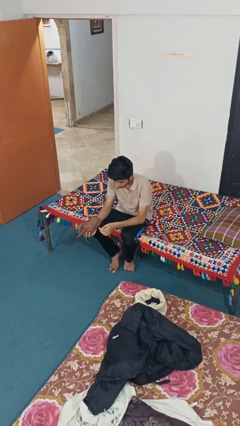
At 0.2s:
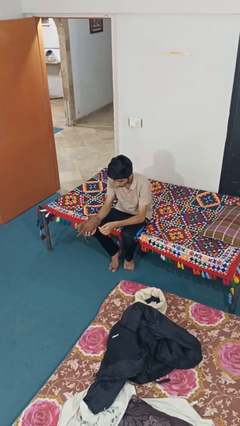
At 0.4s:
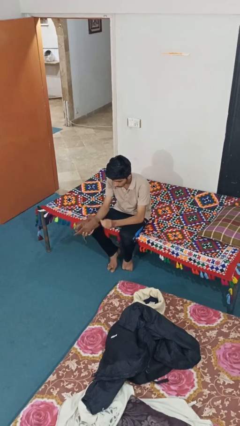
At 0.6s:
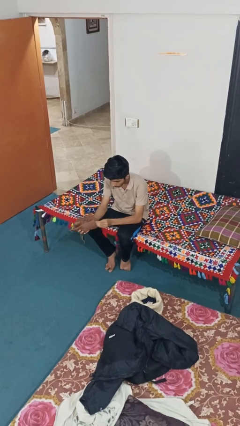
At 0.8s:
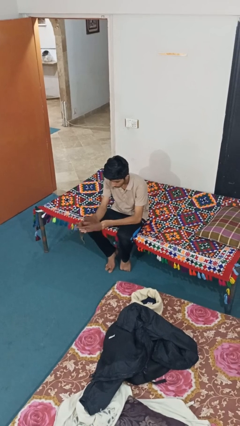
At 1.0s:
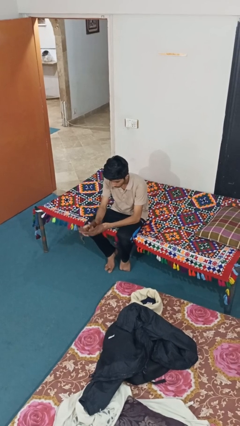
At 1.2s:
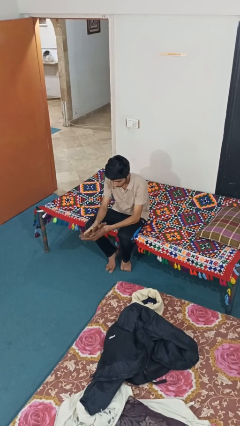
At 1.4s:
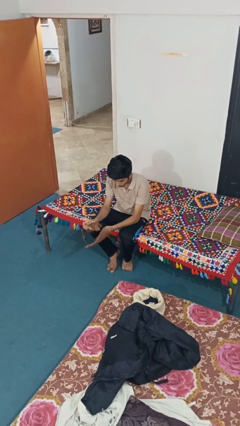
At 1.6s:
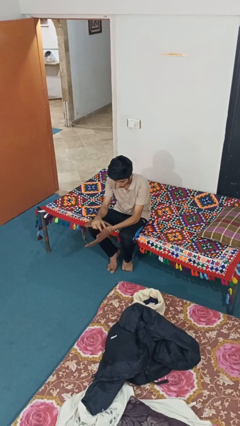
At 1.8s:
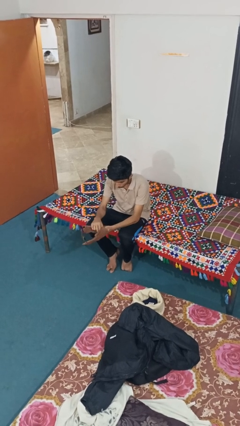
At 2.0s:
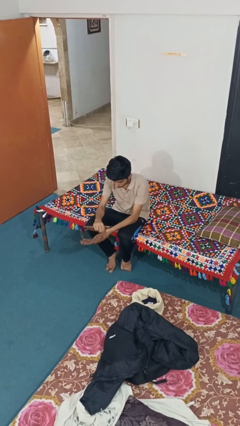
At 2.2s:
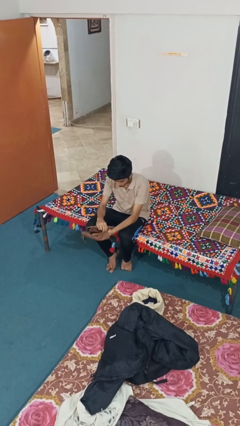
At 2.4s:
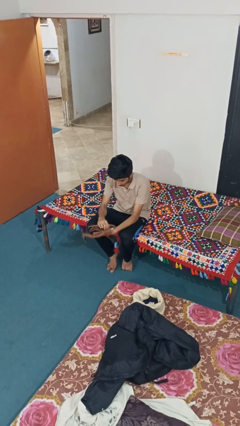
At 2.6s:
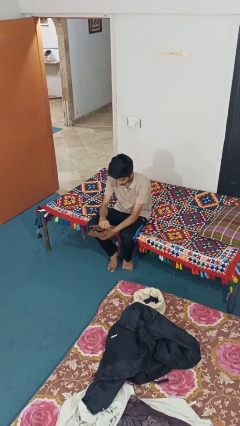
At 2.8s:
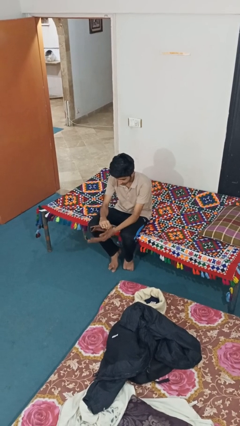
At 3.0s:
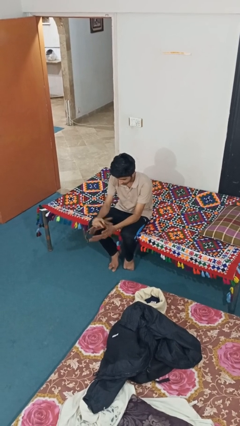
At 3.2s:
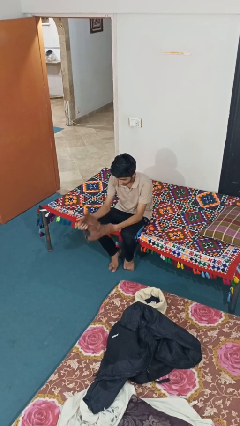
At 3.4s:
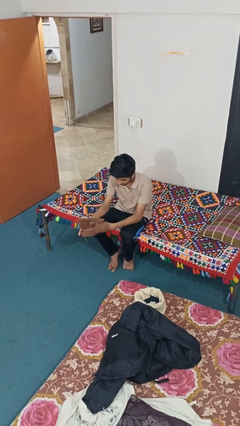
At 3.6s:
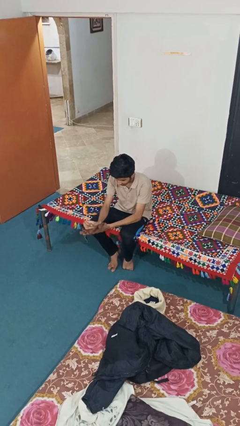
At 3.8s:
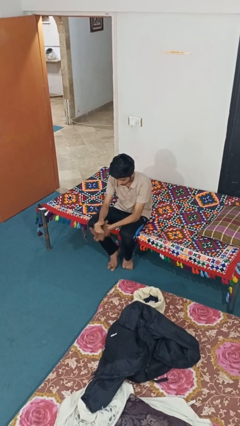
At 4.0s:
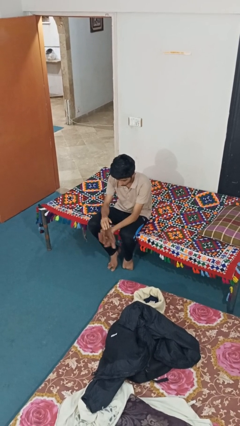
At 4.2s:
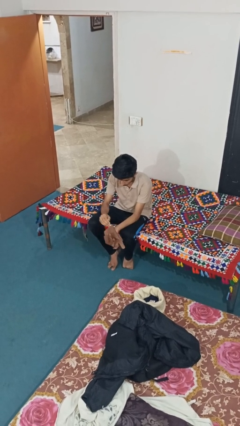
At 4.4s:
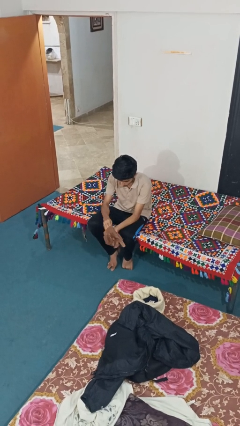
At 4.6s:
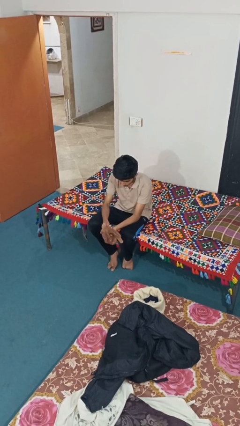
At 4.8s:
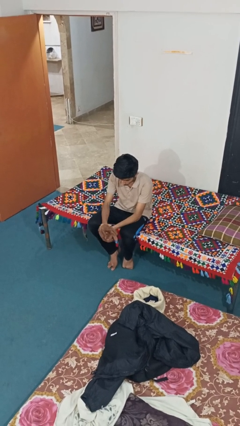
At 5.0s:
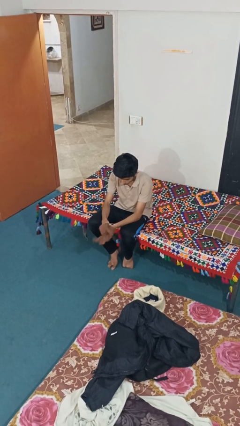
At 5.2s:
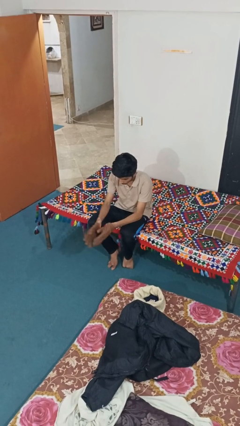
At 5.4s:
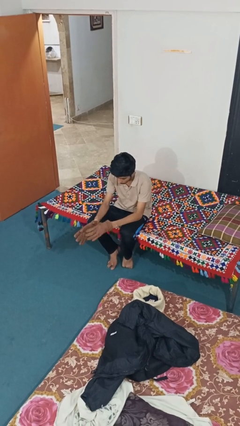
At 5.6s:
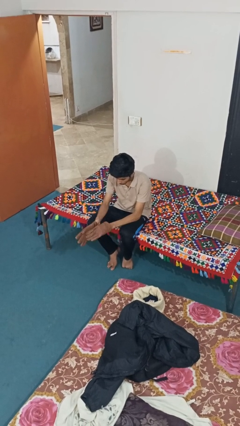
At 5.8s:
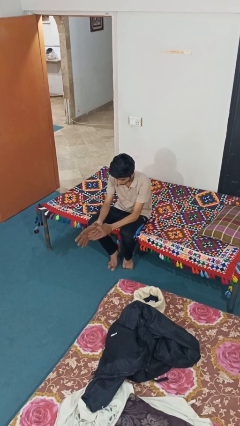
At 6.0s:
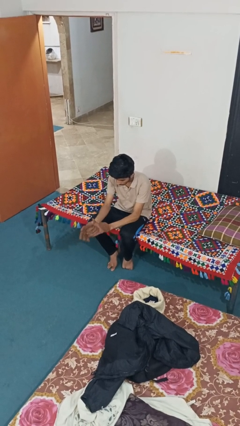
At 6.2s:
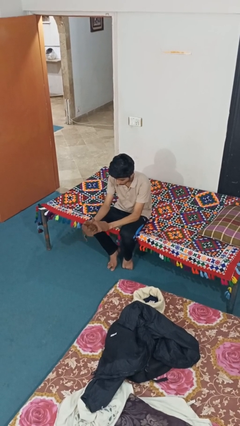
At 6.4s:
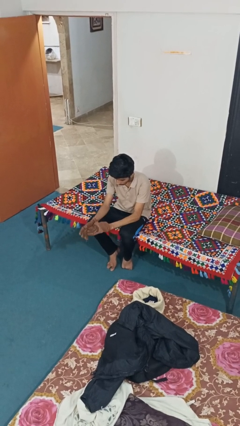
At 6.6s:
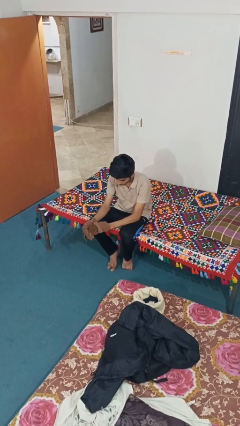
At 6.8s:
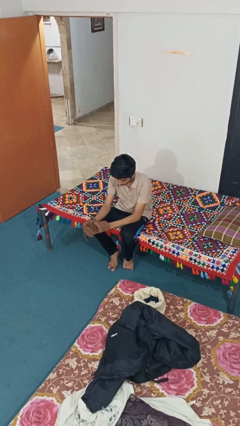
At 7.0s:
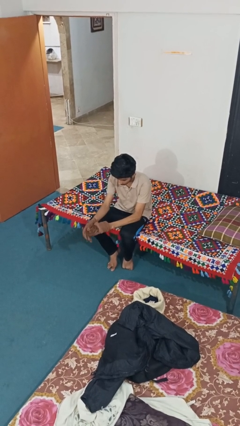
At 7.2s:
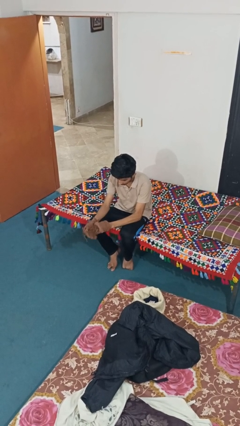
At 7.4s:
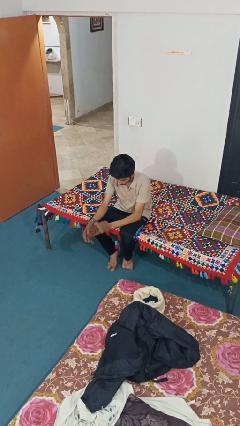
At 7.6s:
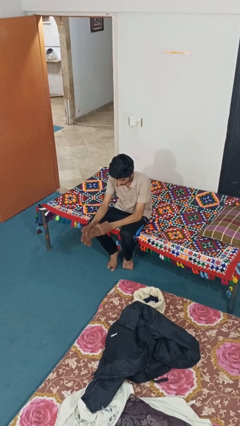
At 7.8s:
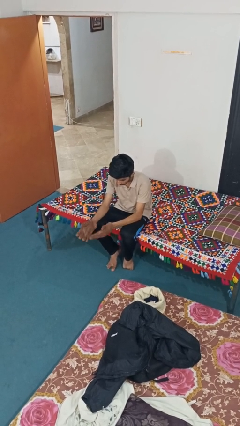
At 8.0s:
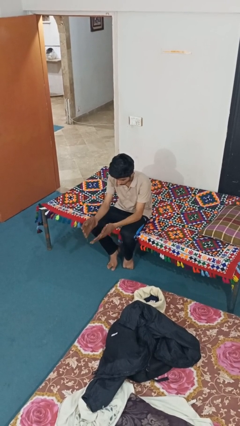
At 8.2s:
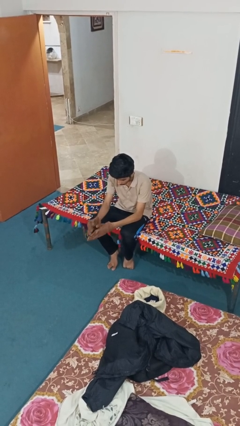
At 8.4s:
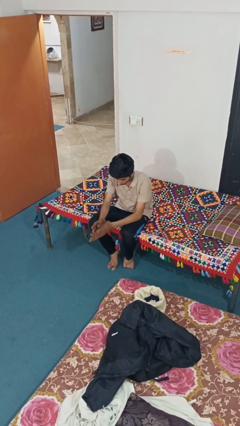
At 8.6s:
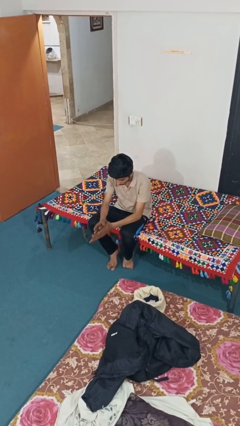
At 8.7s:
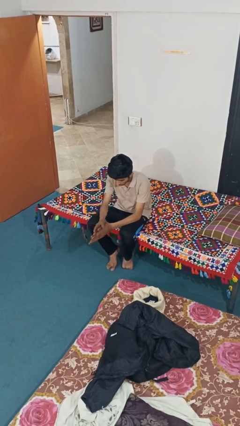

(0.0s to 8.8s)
person puts on gloves

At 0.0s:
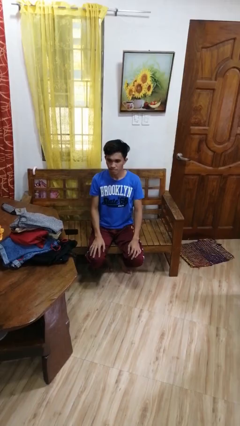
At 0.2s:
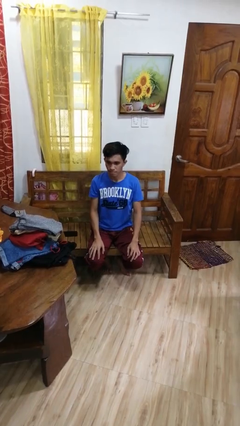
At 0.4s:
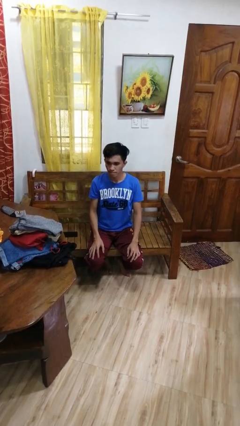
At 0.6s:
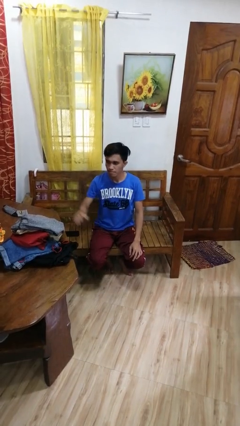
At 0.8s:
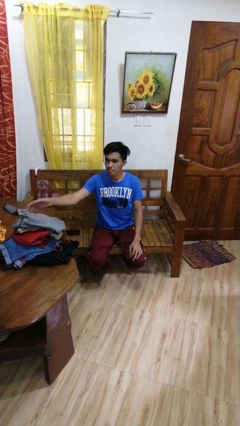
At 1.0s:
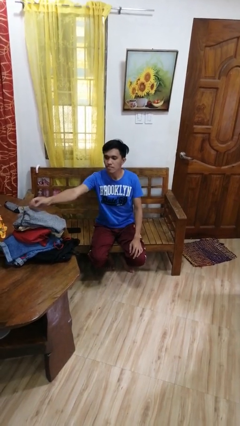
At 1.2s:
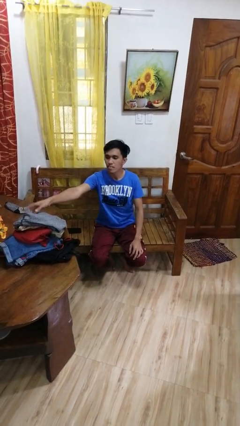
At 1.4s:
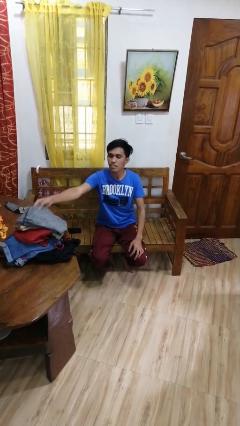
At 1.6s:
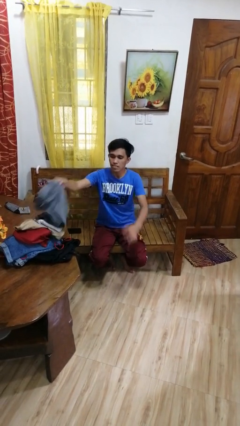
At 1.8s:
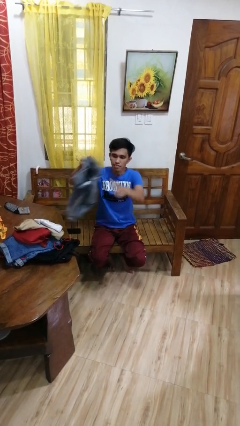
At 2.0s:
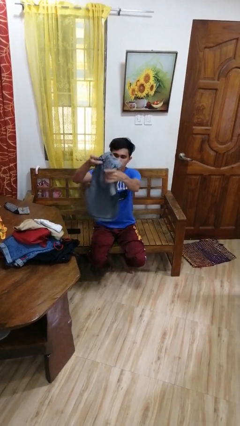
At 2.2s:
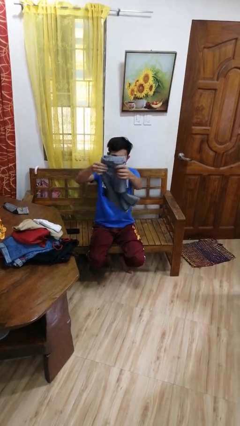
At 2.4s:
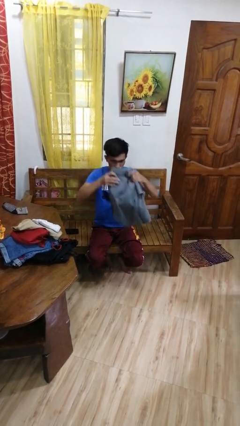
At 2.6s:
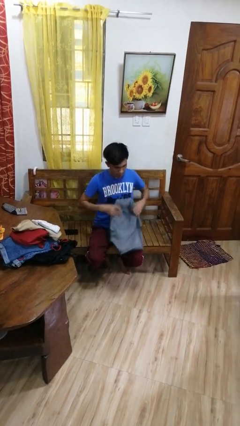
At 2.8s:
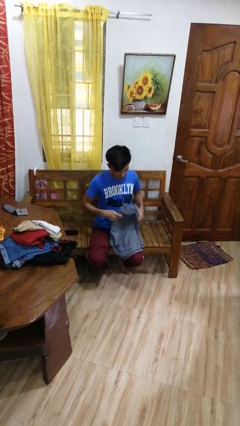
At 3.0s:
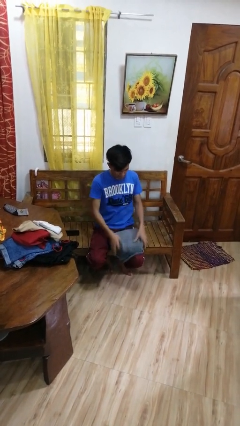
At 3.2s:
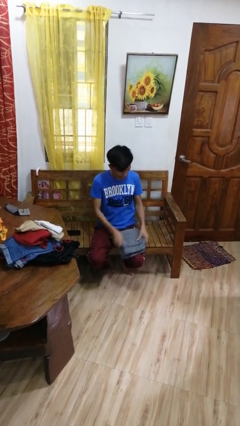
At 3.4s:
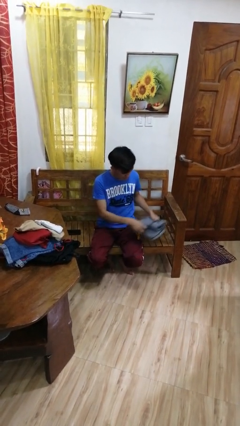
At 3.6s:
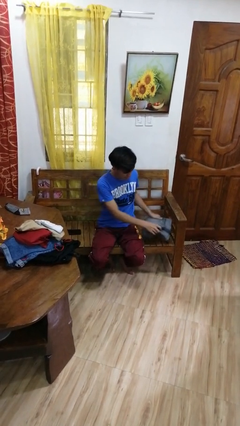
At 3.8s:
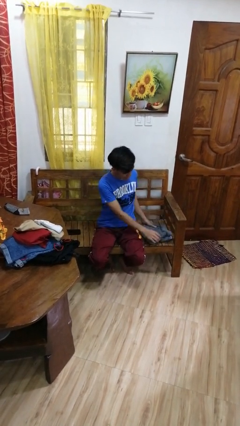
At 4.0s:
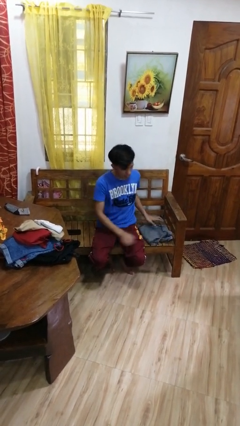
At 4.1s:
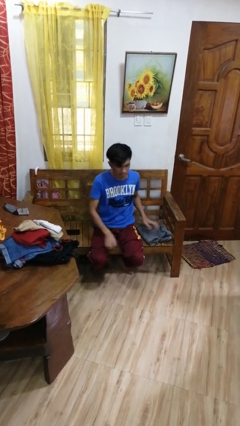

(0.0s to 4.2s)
person folds pants

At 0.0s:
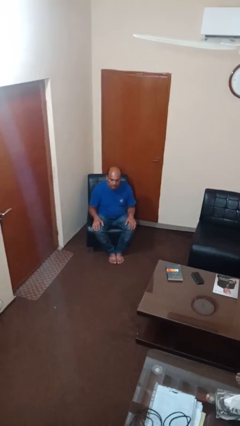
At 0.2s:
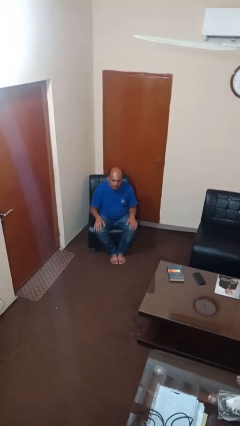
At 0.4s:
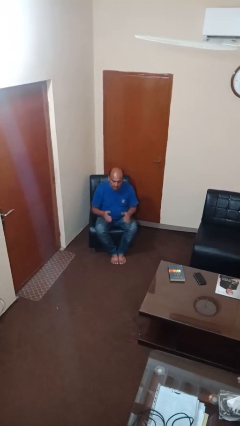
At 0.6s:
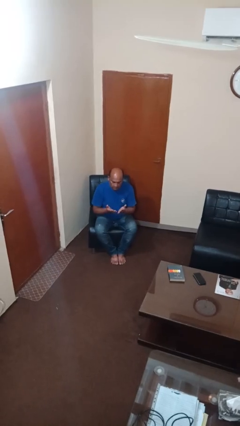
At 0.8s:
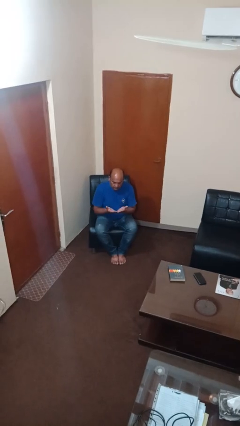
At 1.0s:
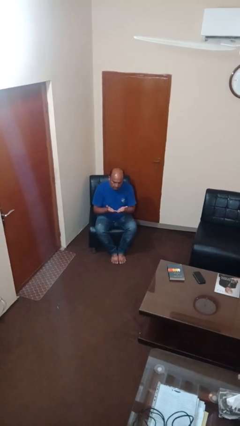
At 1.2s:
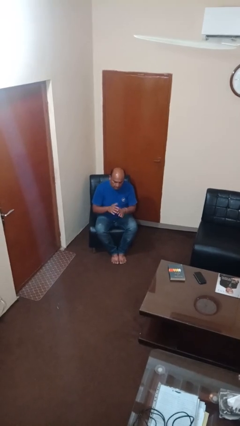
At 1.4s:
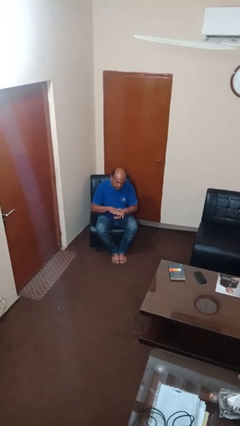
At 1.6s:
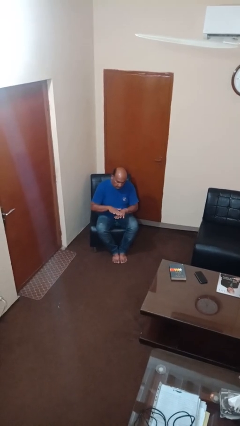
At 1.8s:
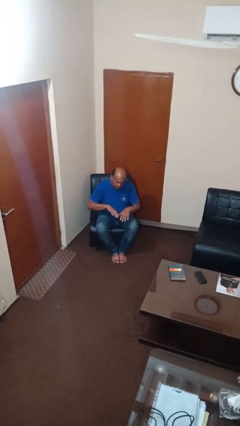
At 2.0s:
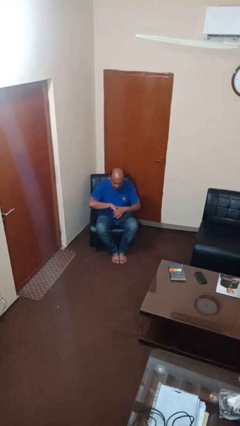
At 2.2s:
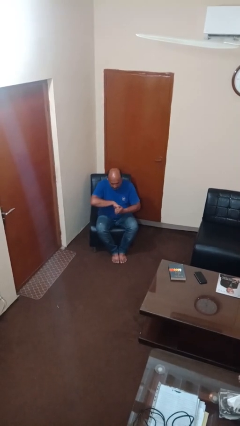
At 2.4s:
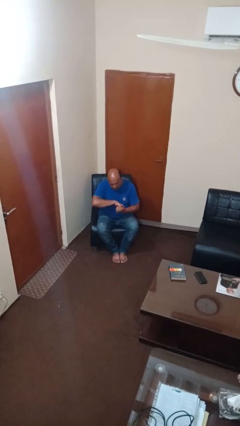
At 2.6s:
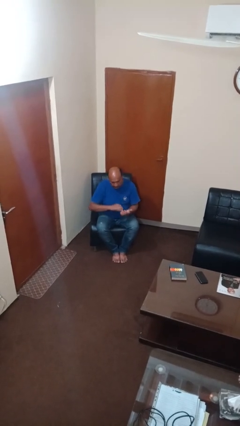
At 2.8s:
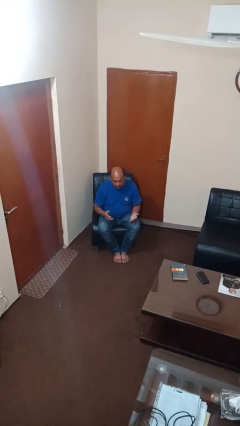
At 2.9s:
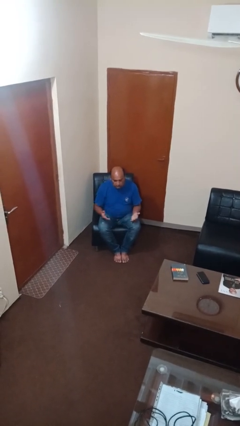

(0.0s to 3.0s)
person looks at hands in lap

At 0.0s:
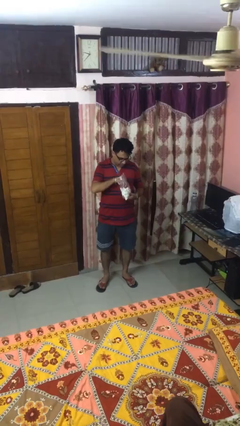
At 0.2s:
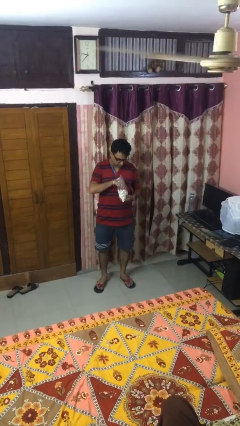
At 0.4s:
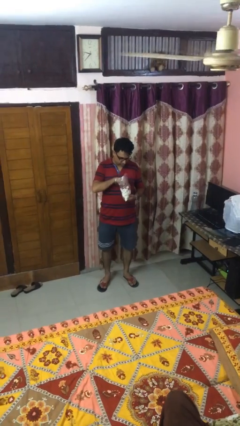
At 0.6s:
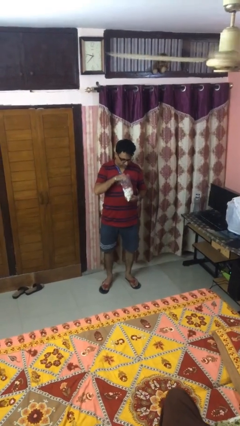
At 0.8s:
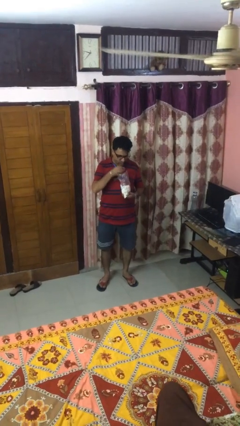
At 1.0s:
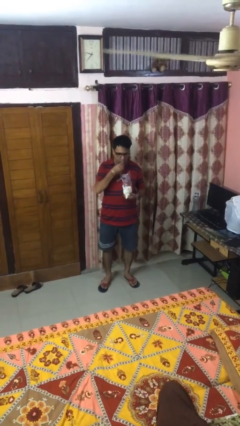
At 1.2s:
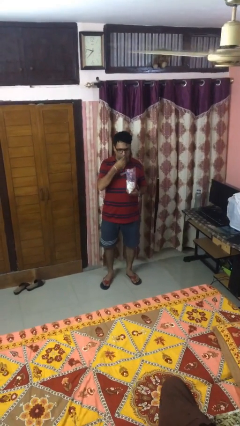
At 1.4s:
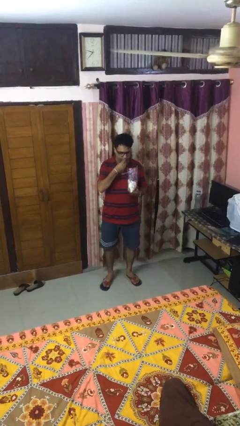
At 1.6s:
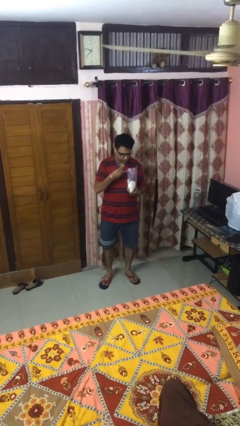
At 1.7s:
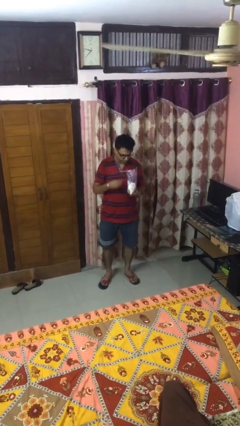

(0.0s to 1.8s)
person eats snack from bag

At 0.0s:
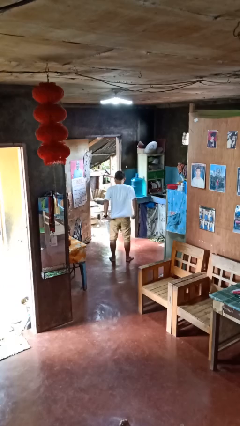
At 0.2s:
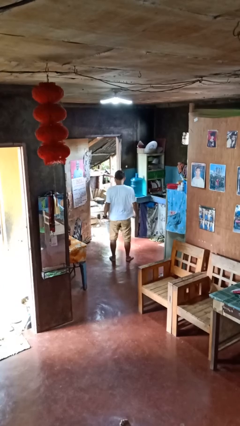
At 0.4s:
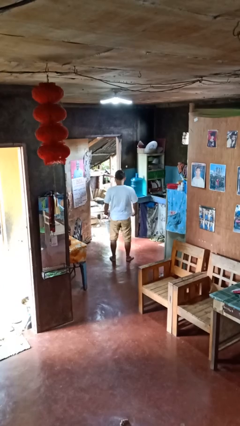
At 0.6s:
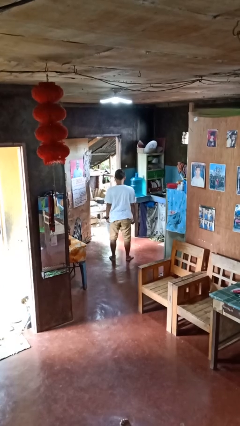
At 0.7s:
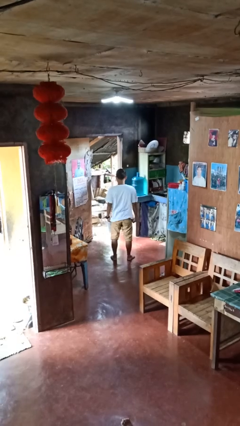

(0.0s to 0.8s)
person untucks shirt
